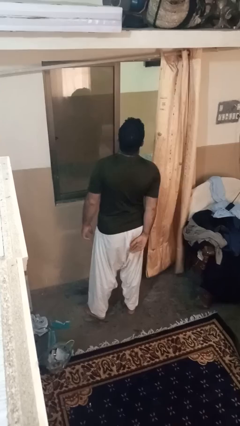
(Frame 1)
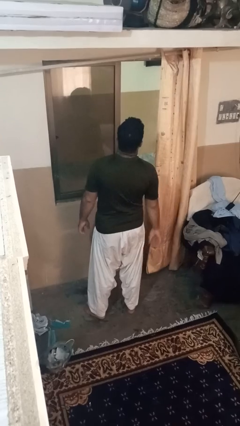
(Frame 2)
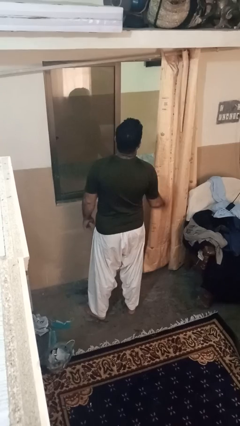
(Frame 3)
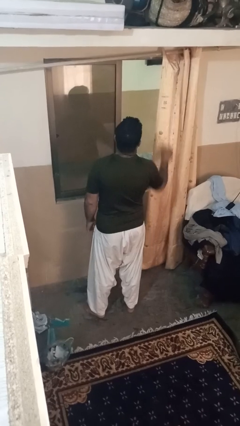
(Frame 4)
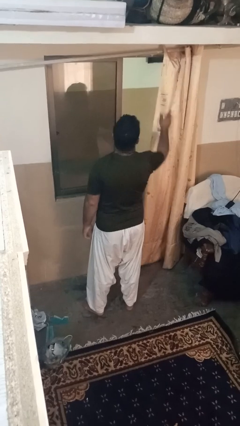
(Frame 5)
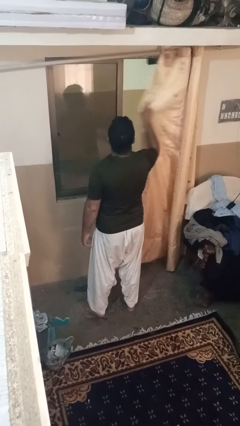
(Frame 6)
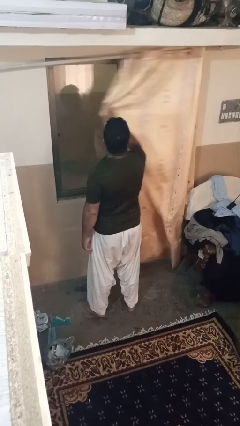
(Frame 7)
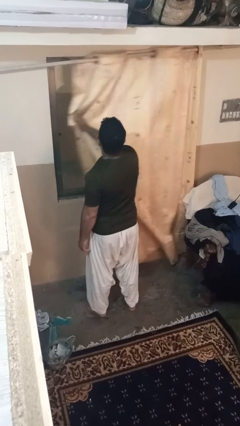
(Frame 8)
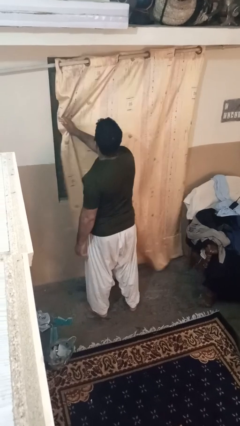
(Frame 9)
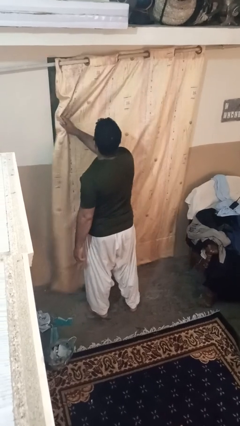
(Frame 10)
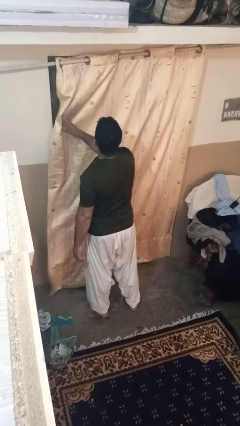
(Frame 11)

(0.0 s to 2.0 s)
person closes curtains

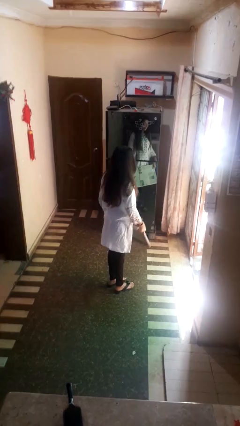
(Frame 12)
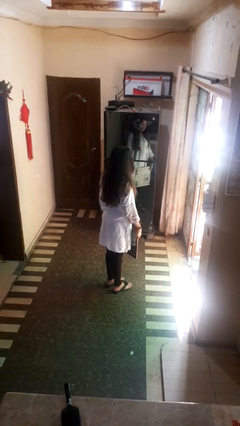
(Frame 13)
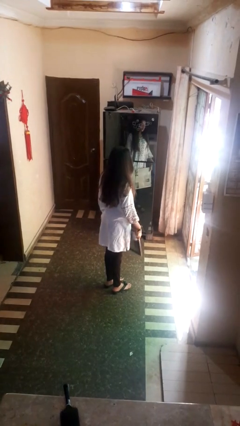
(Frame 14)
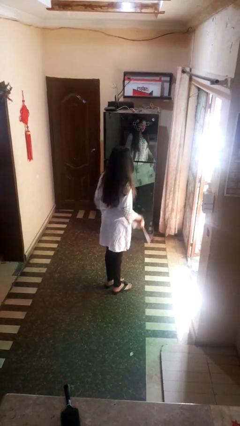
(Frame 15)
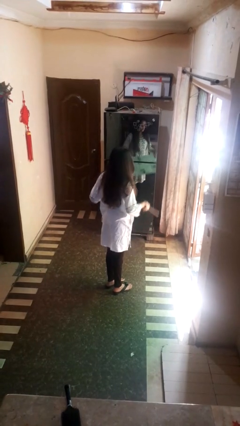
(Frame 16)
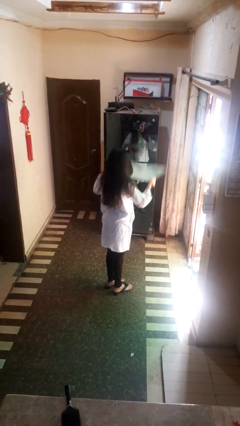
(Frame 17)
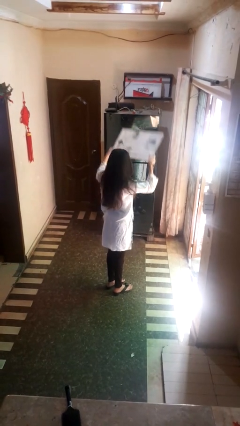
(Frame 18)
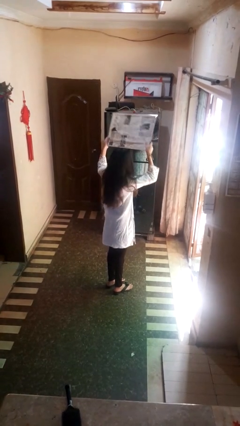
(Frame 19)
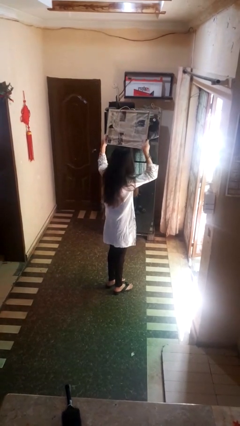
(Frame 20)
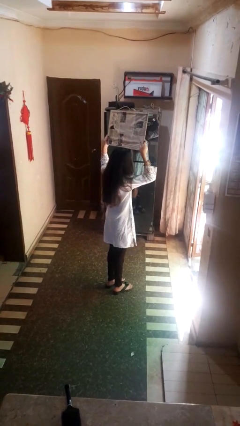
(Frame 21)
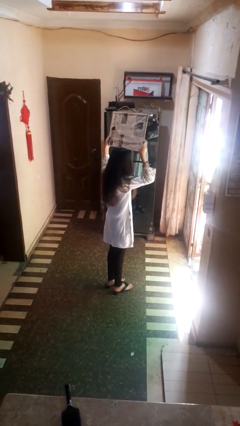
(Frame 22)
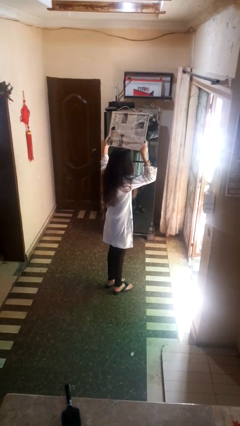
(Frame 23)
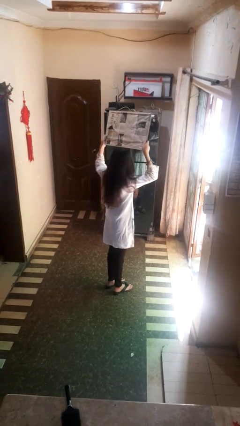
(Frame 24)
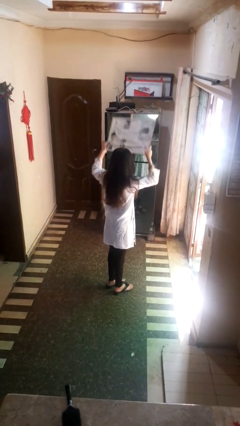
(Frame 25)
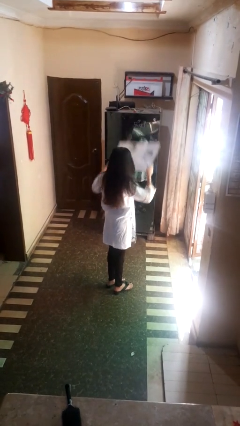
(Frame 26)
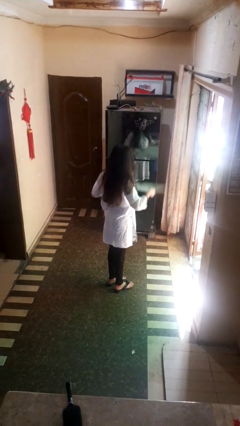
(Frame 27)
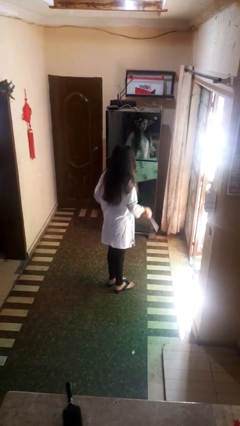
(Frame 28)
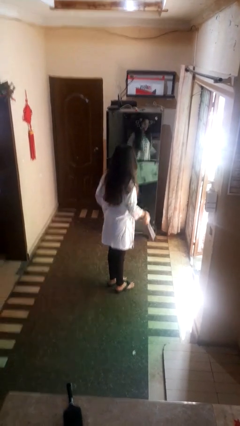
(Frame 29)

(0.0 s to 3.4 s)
person holds object above head

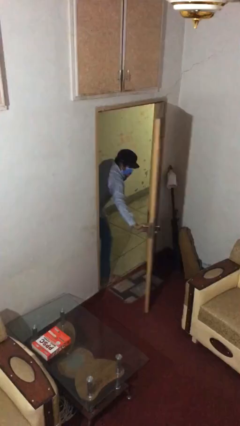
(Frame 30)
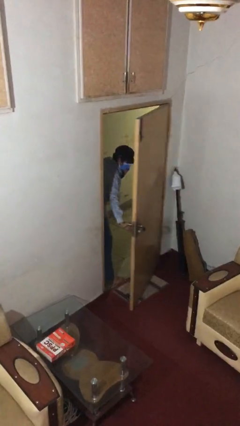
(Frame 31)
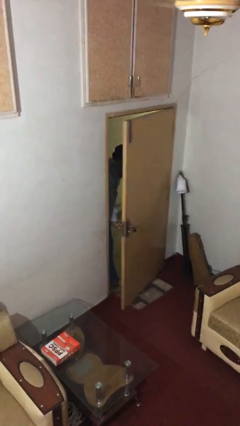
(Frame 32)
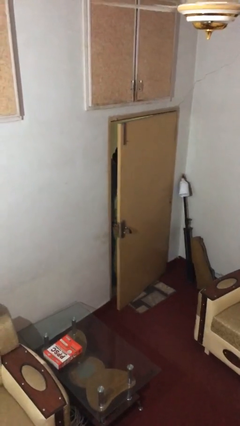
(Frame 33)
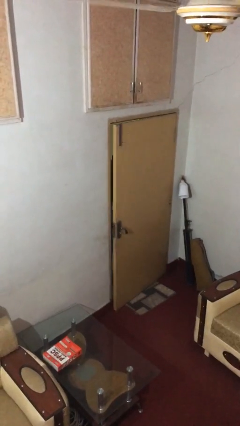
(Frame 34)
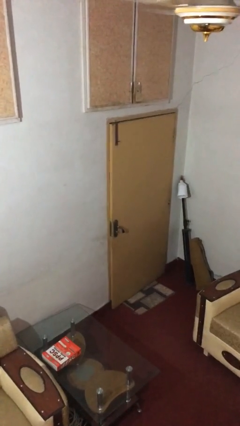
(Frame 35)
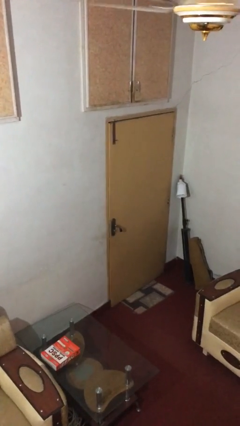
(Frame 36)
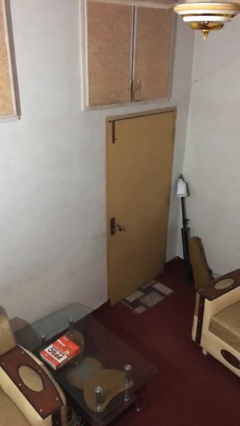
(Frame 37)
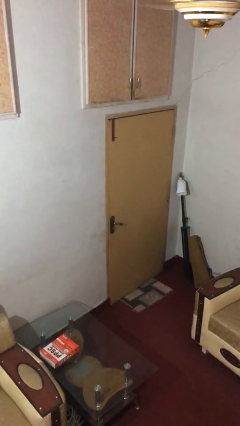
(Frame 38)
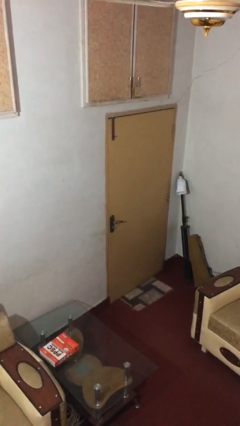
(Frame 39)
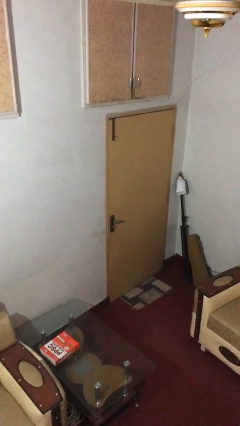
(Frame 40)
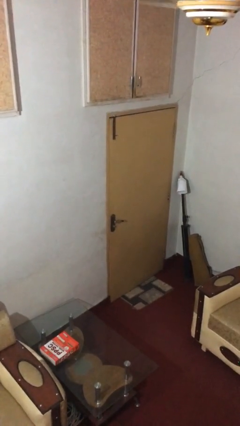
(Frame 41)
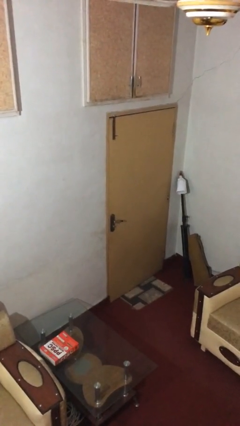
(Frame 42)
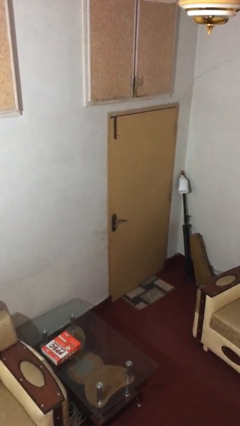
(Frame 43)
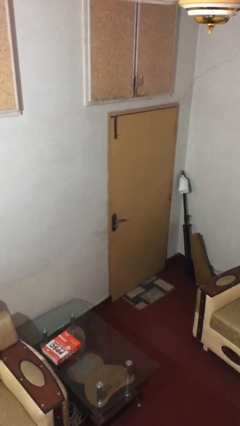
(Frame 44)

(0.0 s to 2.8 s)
person closes facility door

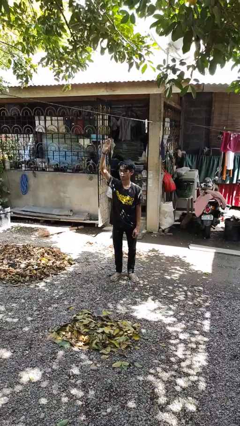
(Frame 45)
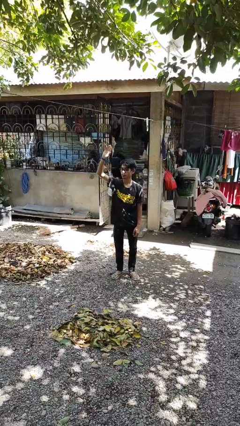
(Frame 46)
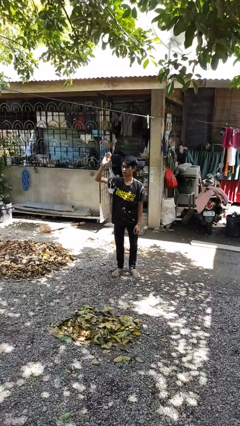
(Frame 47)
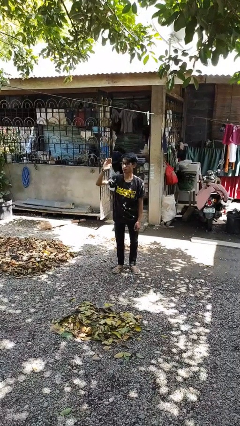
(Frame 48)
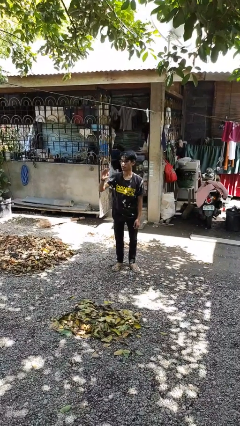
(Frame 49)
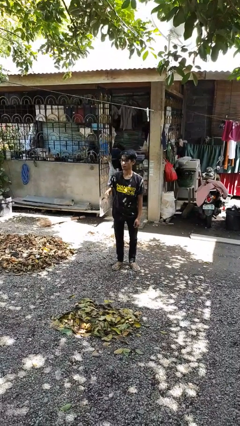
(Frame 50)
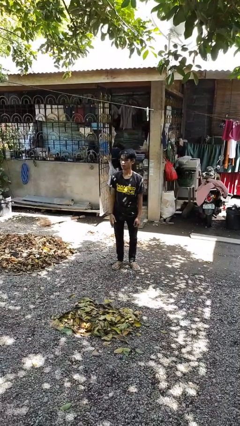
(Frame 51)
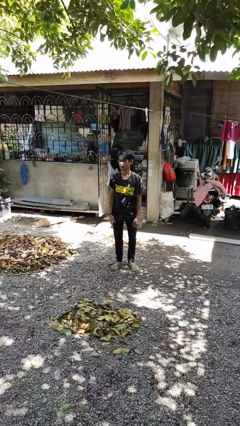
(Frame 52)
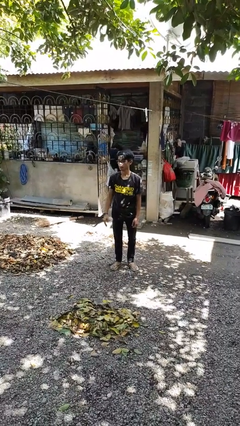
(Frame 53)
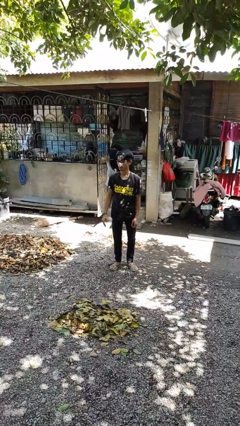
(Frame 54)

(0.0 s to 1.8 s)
person gestures lower hand

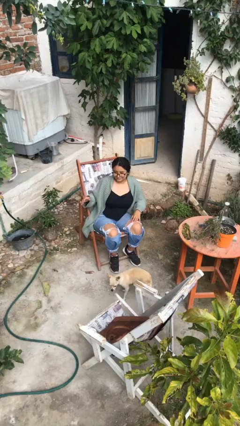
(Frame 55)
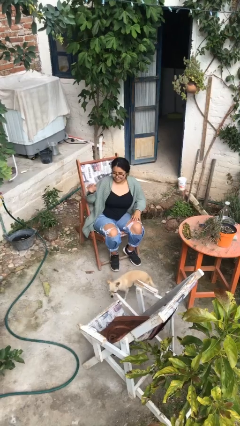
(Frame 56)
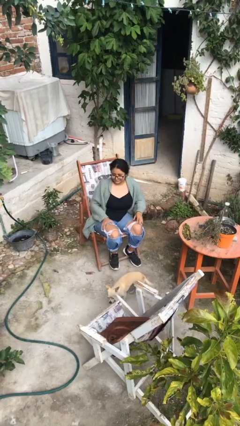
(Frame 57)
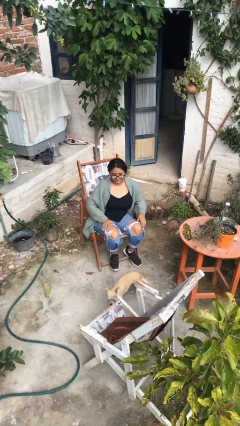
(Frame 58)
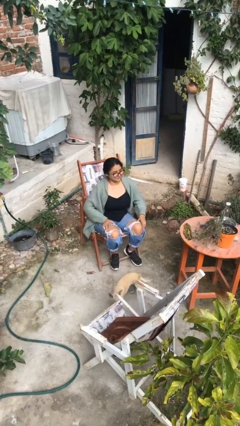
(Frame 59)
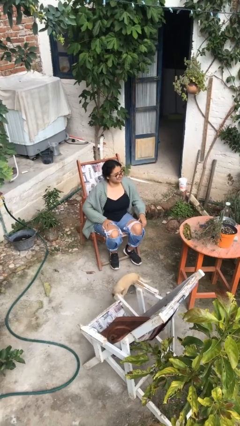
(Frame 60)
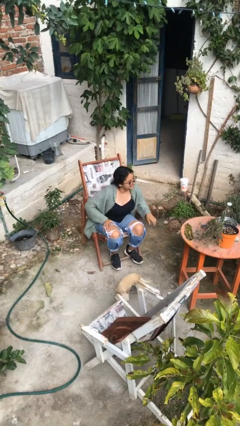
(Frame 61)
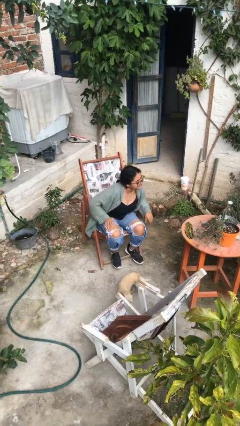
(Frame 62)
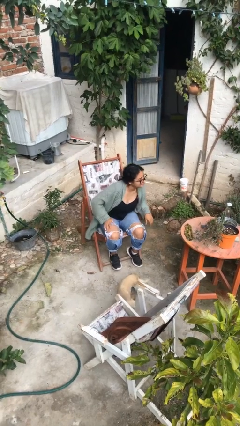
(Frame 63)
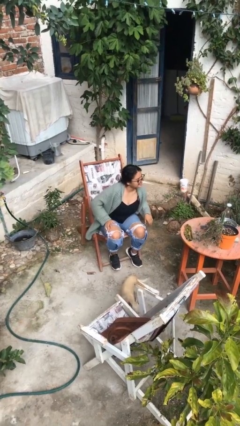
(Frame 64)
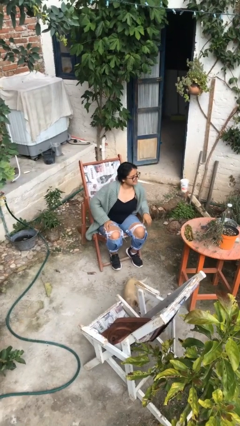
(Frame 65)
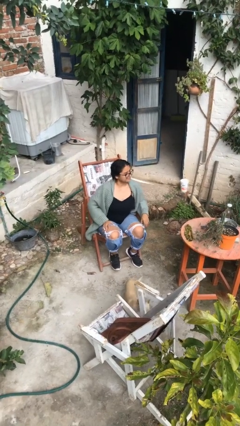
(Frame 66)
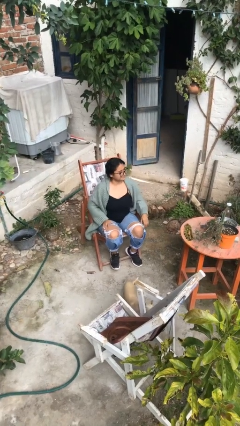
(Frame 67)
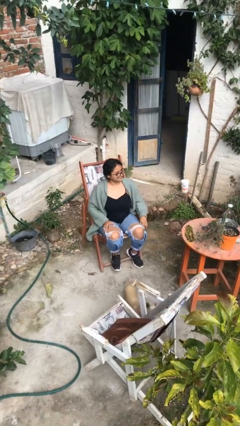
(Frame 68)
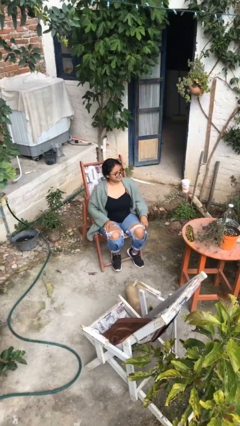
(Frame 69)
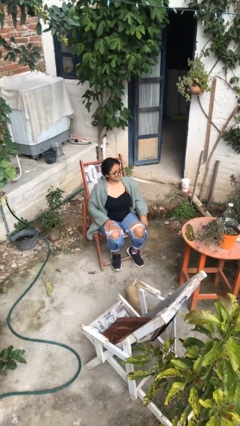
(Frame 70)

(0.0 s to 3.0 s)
person slaps hands on thighs

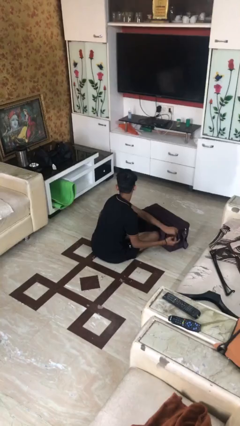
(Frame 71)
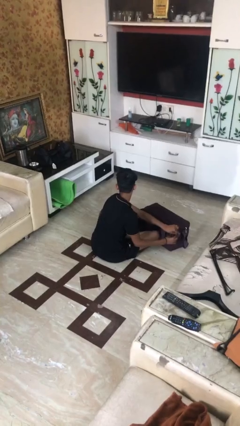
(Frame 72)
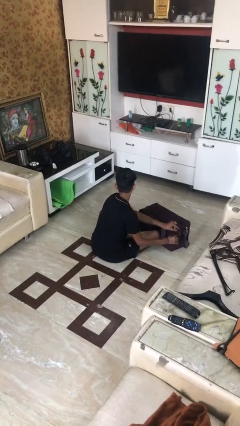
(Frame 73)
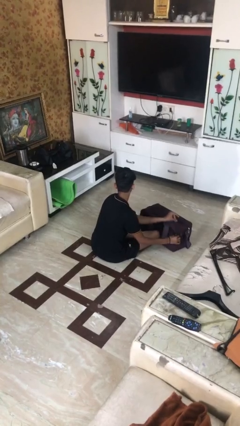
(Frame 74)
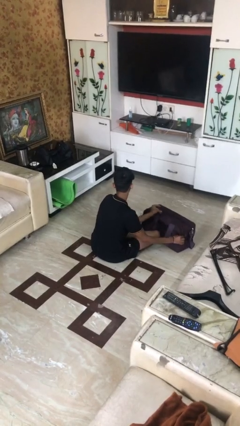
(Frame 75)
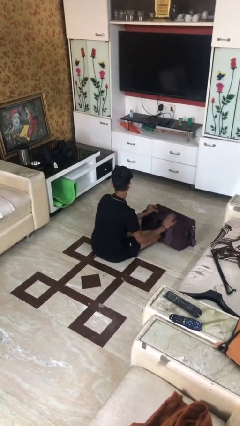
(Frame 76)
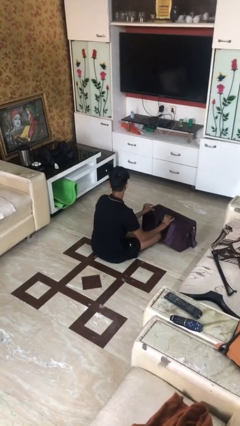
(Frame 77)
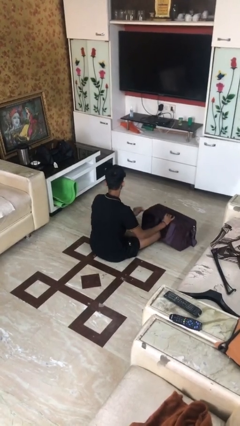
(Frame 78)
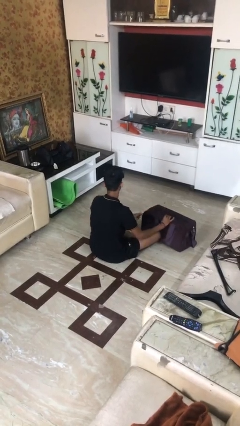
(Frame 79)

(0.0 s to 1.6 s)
person closes suitcase

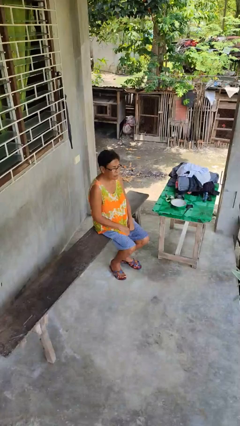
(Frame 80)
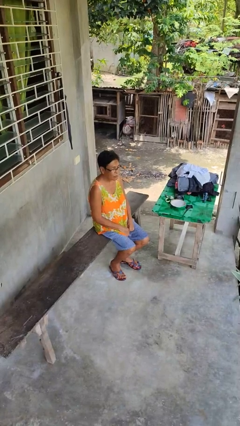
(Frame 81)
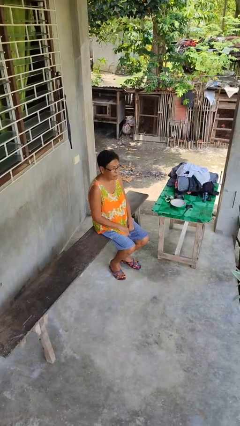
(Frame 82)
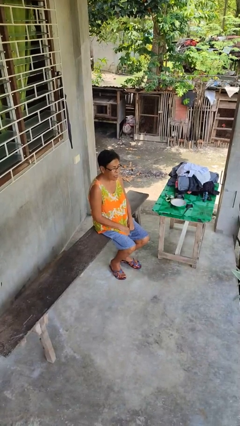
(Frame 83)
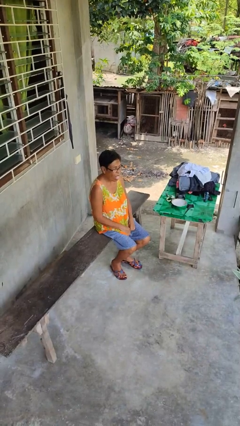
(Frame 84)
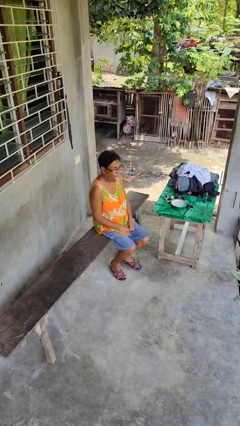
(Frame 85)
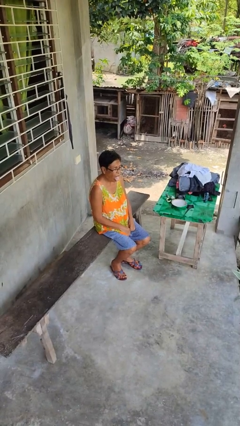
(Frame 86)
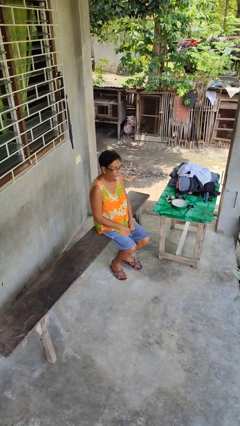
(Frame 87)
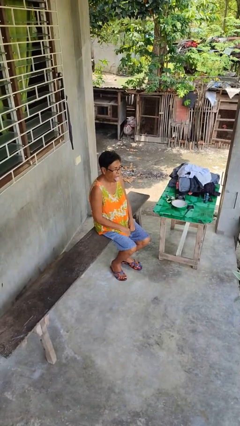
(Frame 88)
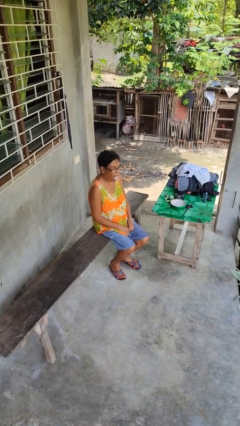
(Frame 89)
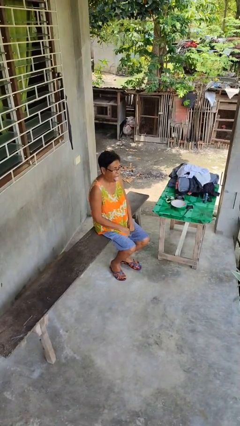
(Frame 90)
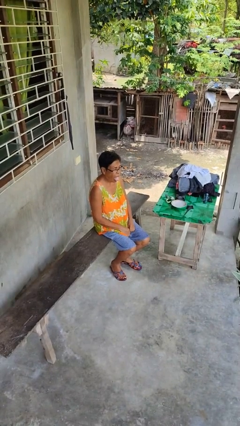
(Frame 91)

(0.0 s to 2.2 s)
person sticks out tongue
